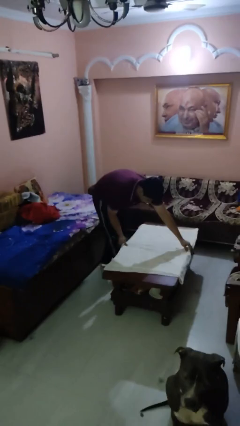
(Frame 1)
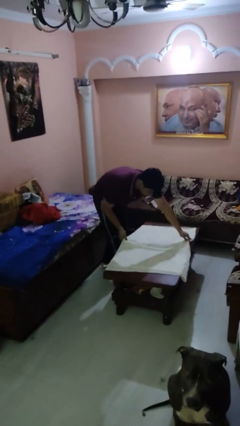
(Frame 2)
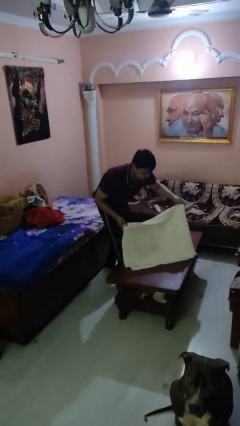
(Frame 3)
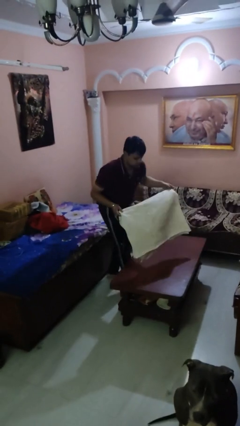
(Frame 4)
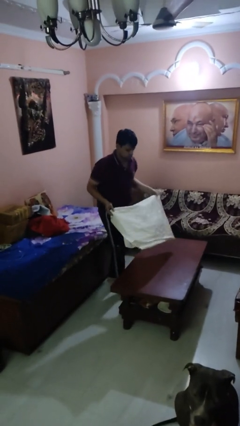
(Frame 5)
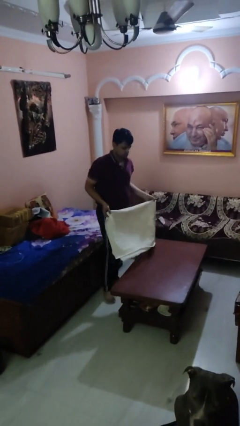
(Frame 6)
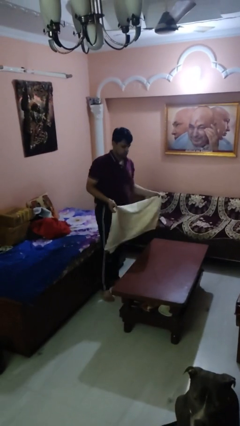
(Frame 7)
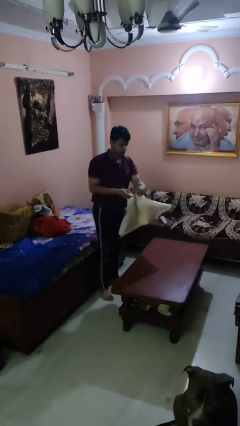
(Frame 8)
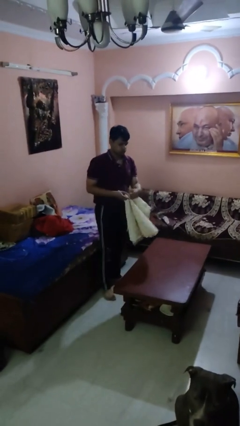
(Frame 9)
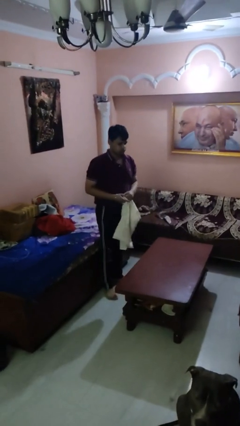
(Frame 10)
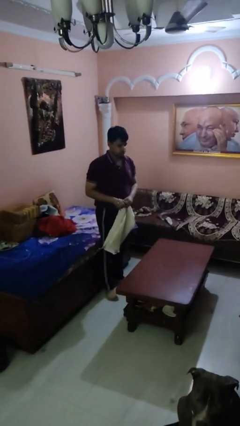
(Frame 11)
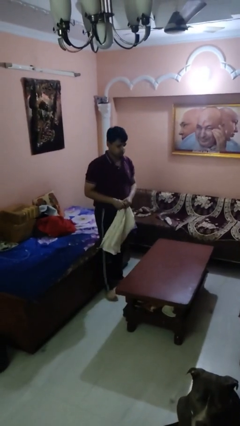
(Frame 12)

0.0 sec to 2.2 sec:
person folds tablecloth

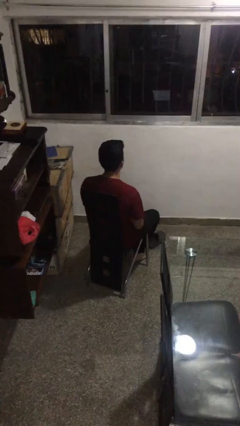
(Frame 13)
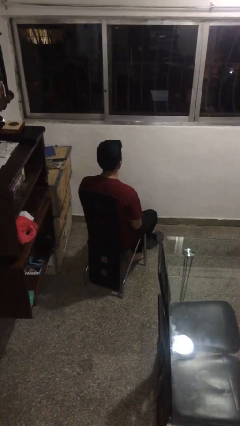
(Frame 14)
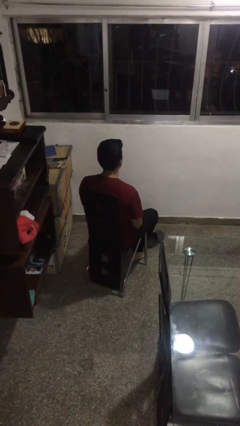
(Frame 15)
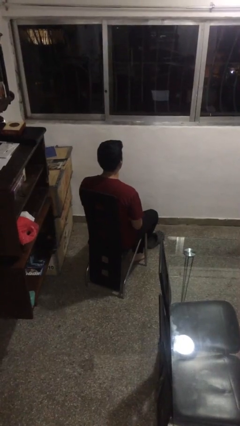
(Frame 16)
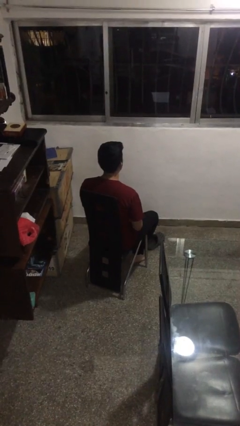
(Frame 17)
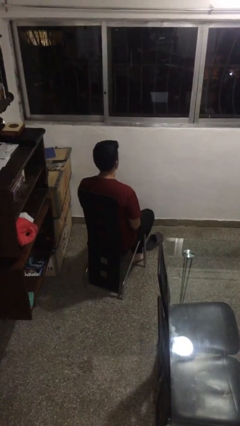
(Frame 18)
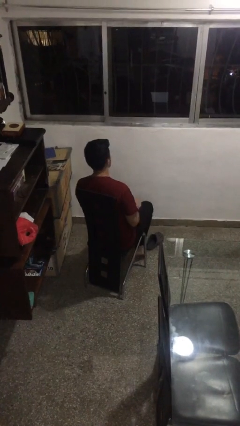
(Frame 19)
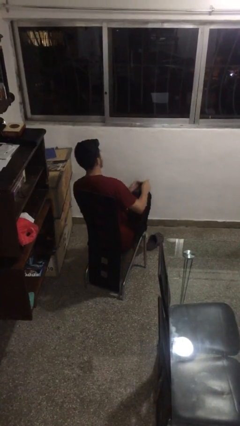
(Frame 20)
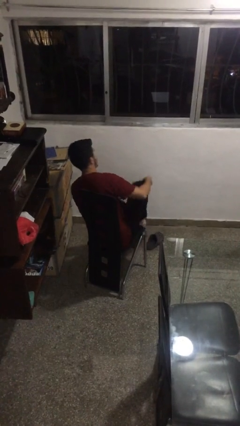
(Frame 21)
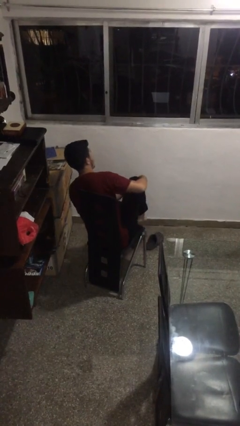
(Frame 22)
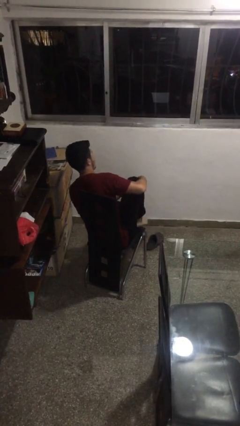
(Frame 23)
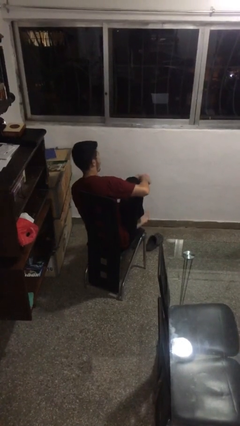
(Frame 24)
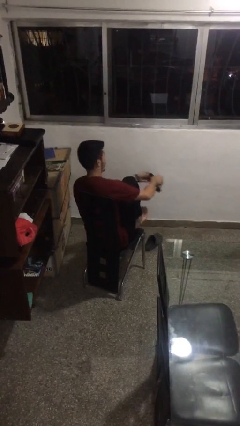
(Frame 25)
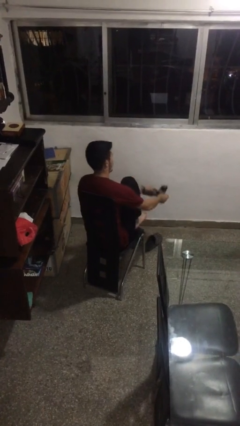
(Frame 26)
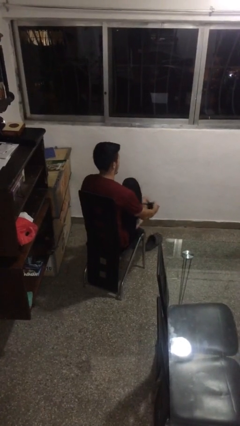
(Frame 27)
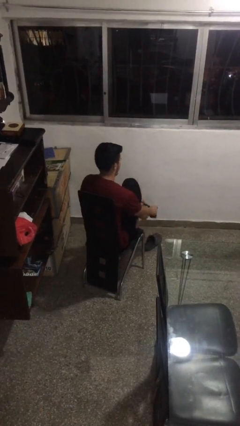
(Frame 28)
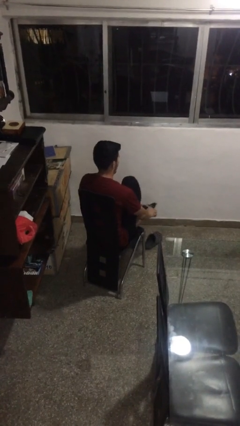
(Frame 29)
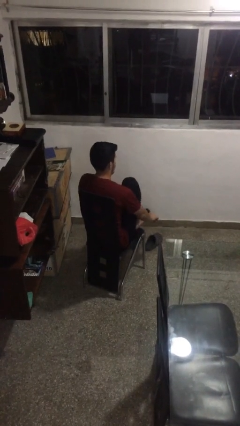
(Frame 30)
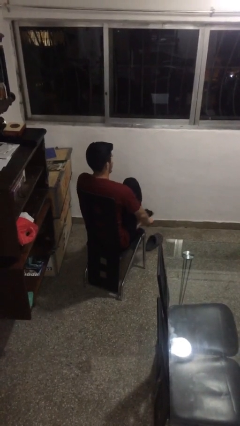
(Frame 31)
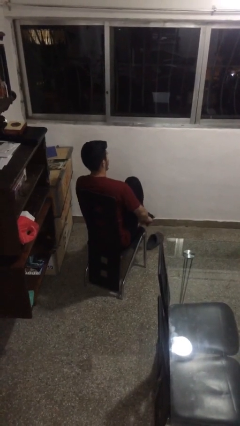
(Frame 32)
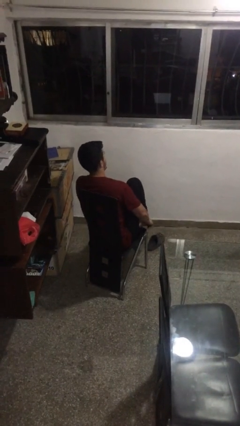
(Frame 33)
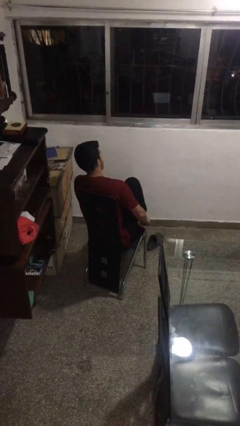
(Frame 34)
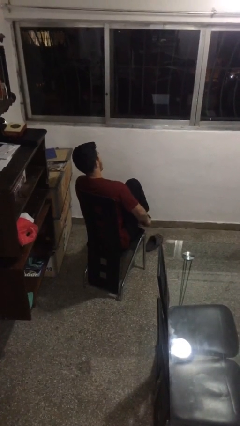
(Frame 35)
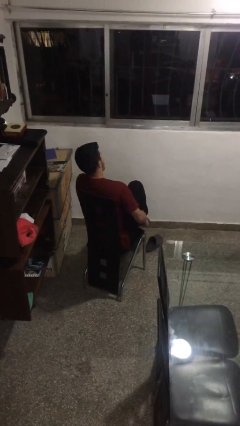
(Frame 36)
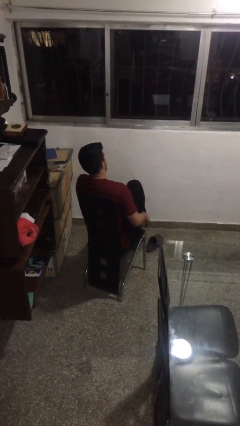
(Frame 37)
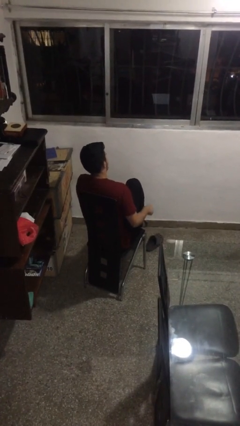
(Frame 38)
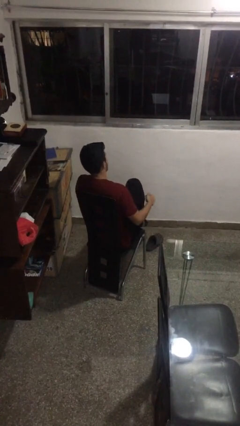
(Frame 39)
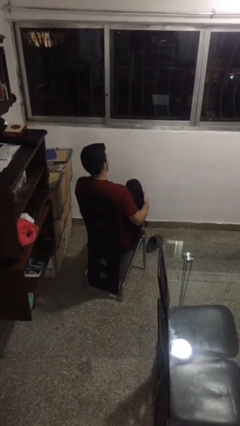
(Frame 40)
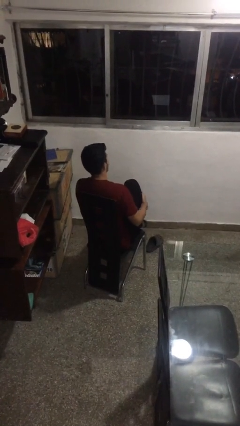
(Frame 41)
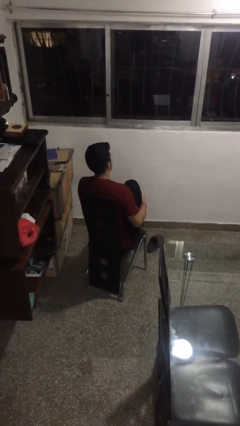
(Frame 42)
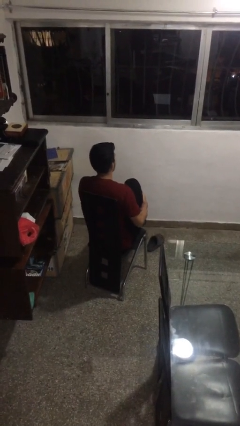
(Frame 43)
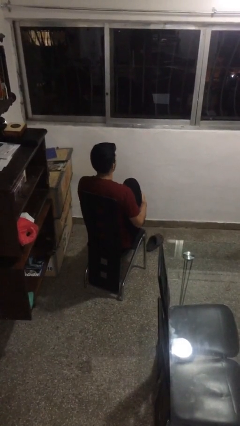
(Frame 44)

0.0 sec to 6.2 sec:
person puts on socks

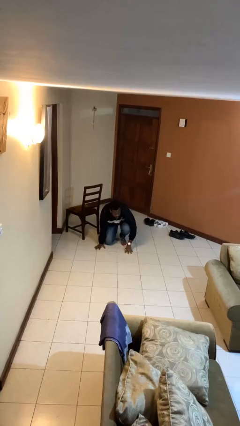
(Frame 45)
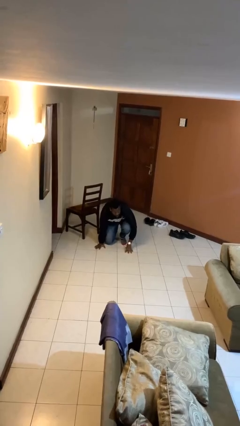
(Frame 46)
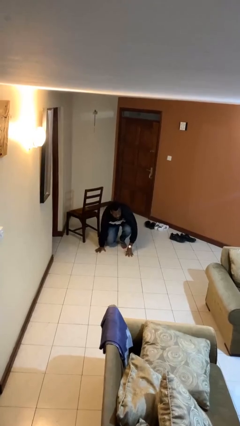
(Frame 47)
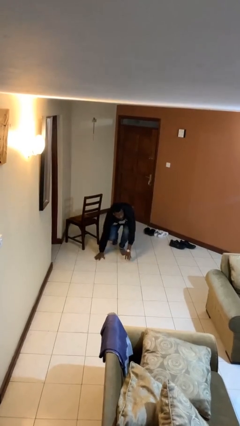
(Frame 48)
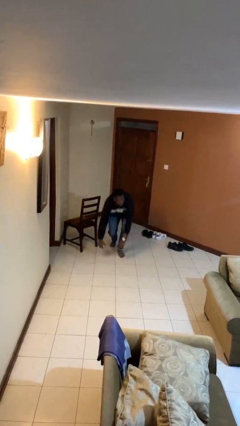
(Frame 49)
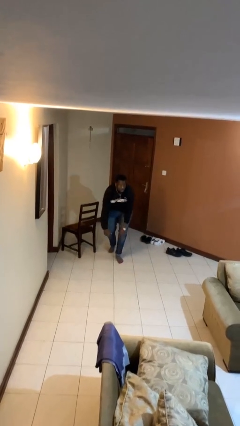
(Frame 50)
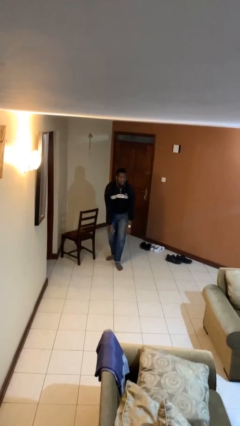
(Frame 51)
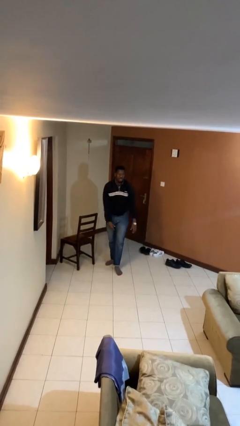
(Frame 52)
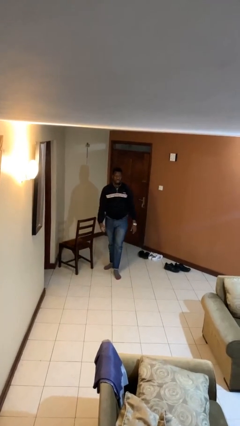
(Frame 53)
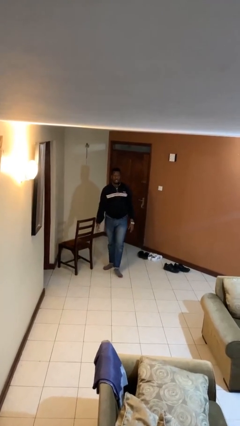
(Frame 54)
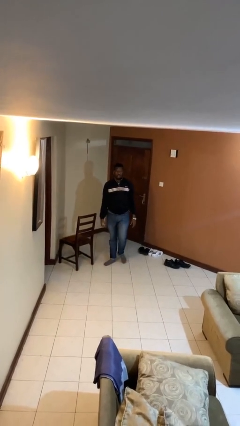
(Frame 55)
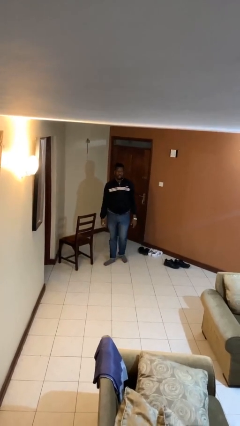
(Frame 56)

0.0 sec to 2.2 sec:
person stands up from floor

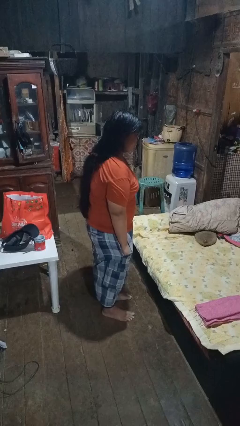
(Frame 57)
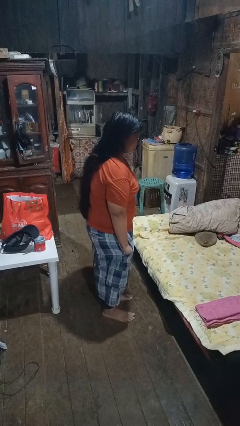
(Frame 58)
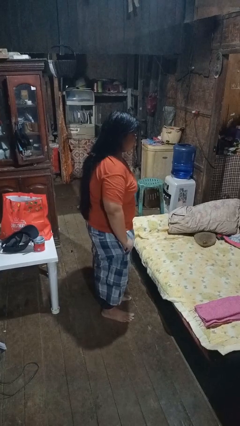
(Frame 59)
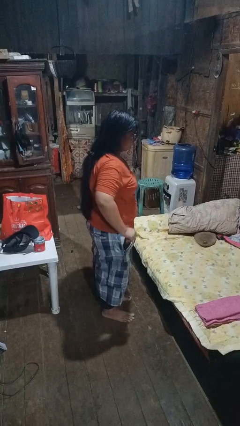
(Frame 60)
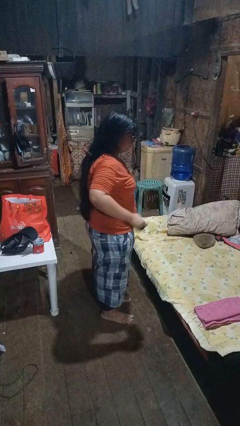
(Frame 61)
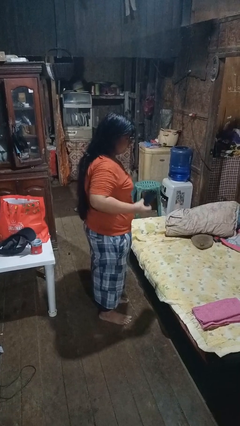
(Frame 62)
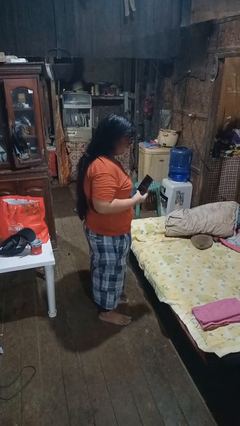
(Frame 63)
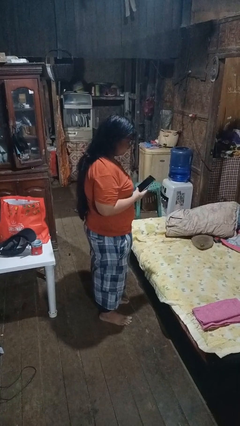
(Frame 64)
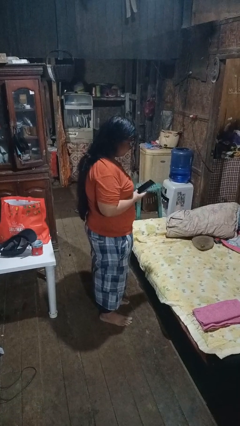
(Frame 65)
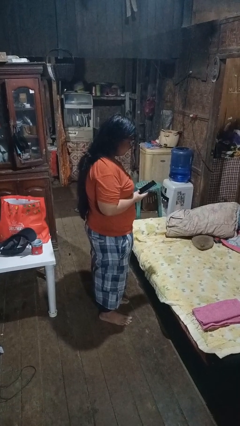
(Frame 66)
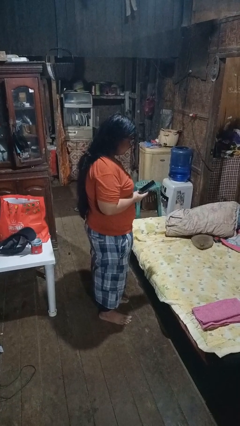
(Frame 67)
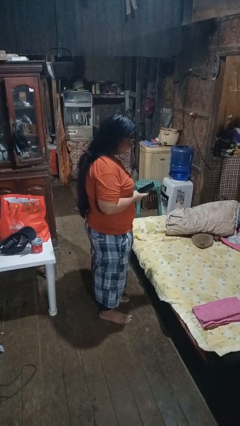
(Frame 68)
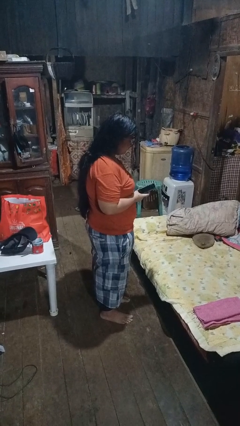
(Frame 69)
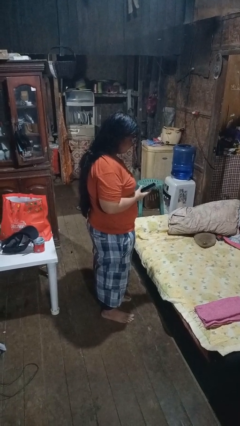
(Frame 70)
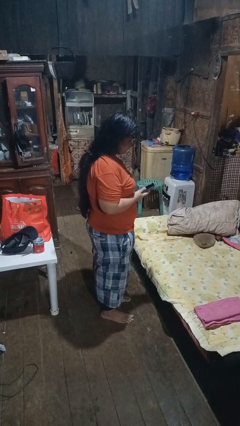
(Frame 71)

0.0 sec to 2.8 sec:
person takes phone from pocket

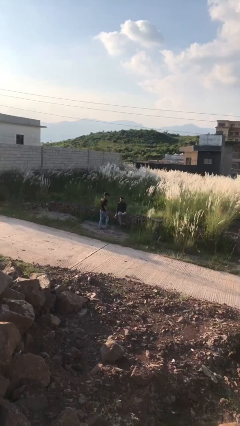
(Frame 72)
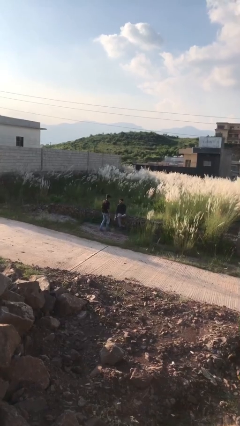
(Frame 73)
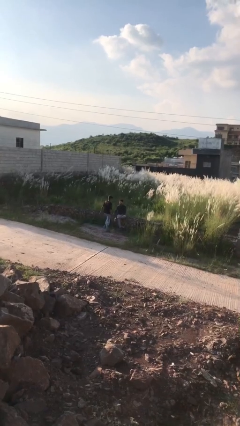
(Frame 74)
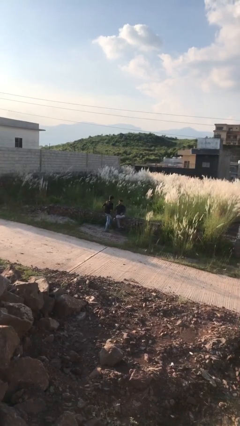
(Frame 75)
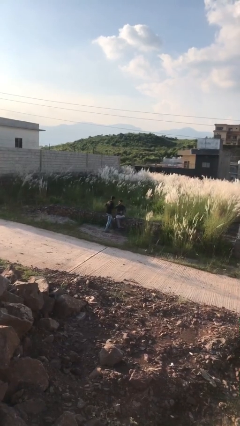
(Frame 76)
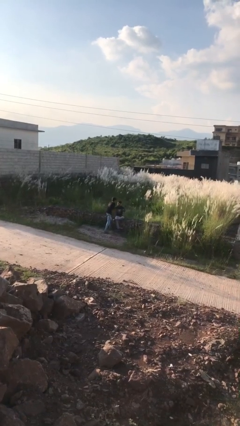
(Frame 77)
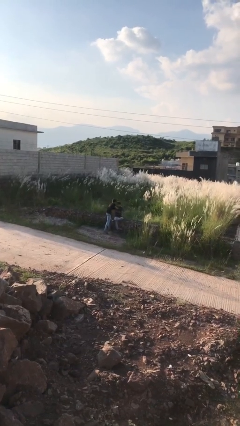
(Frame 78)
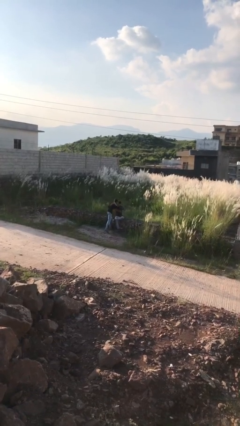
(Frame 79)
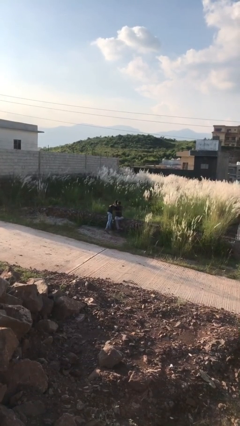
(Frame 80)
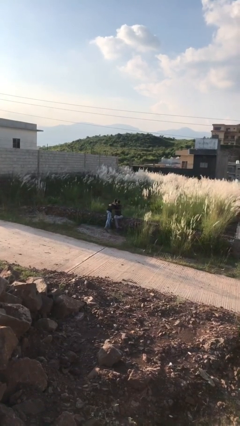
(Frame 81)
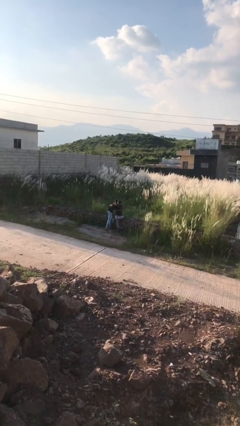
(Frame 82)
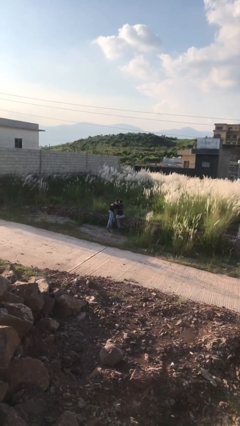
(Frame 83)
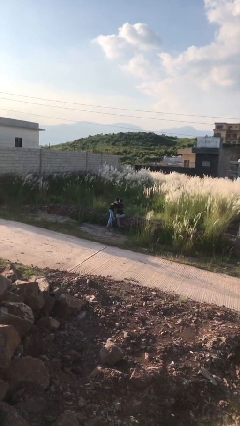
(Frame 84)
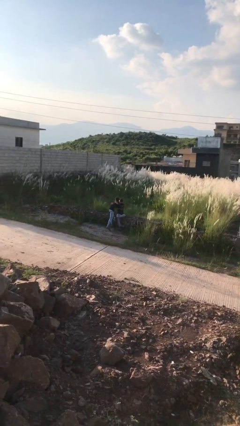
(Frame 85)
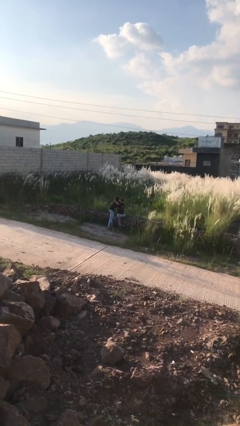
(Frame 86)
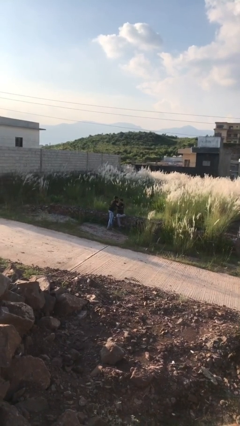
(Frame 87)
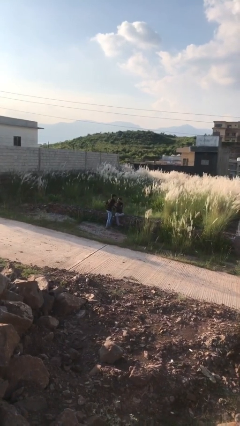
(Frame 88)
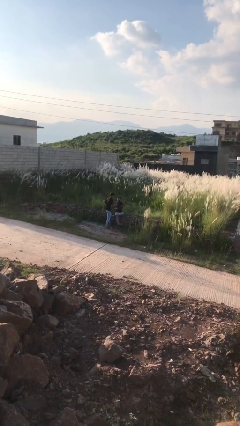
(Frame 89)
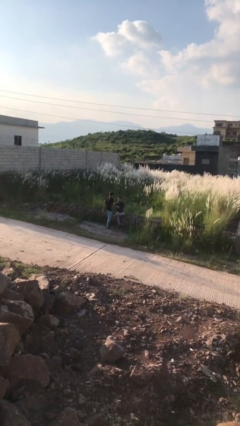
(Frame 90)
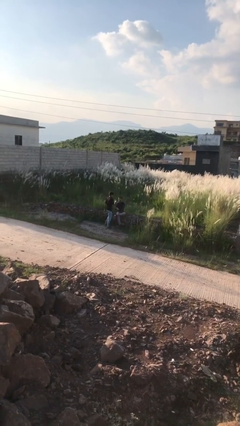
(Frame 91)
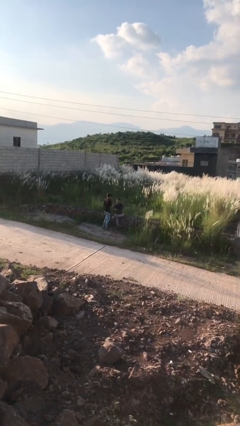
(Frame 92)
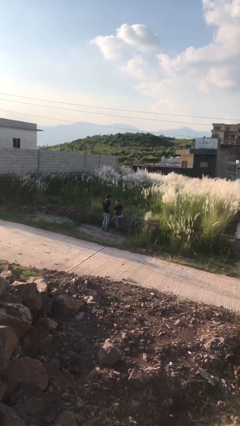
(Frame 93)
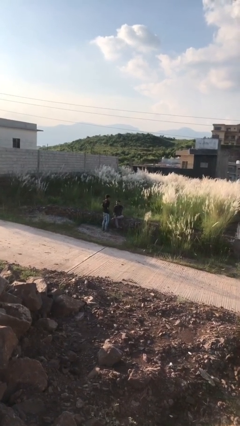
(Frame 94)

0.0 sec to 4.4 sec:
person embraces person
